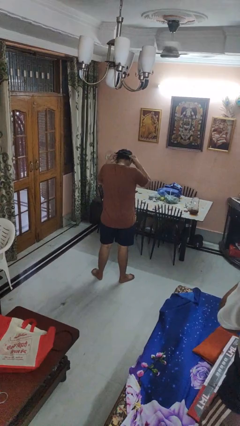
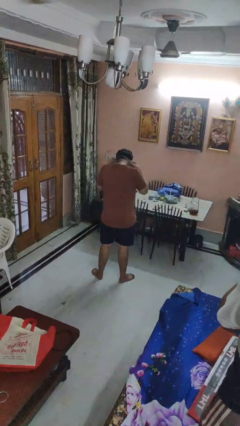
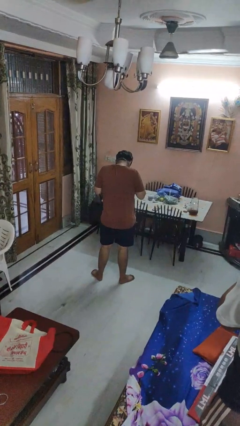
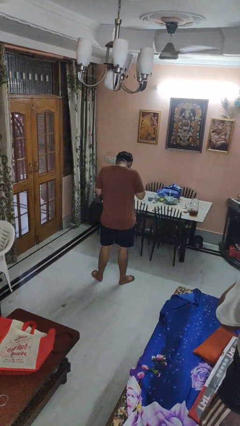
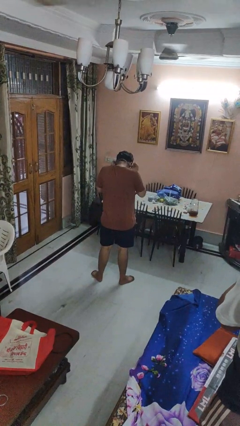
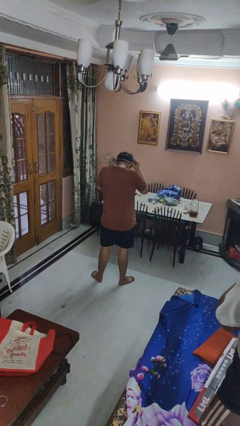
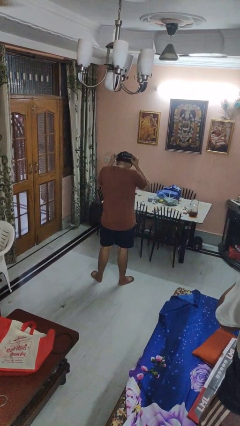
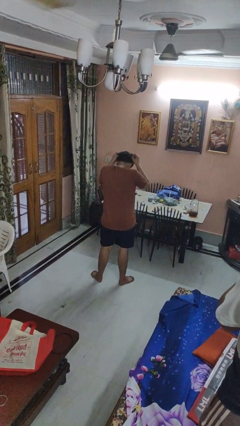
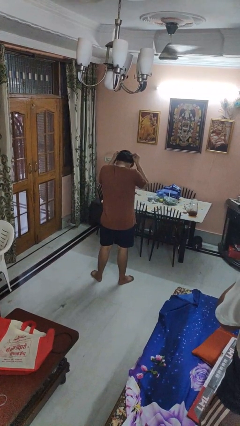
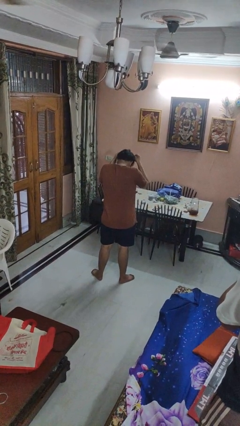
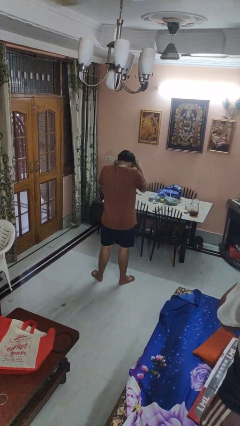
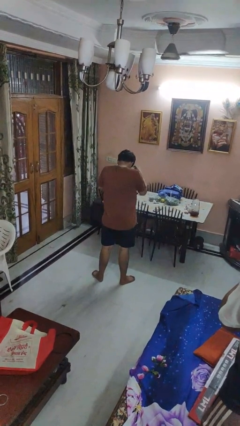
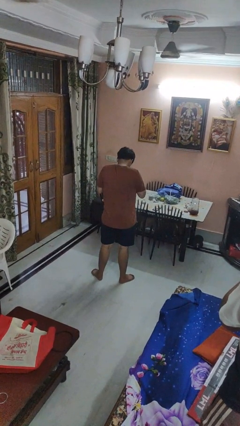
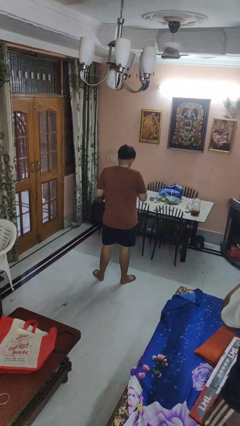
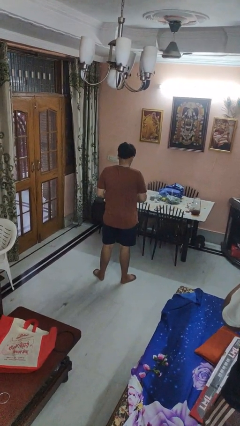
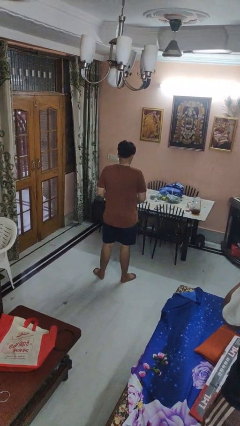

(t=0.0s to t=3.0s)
person takes off necktie

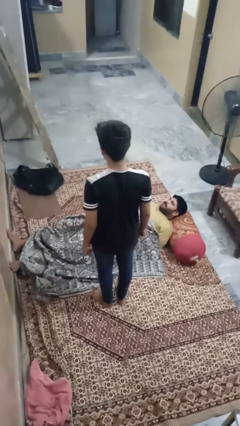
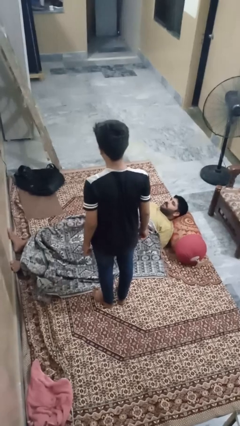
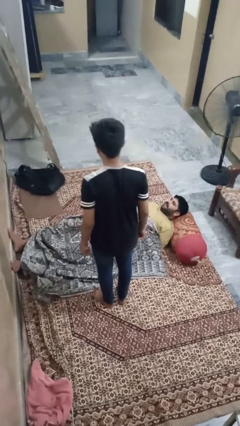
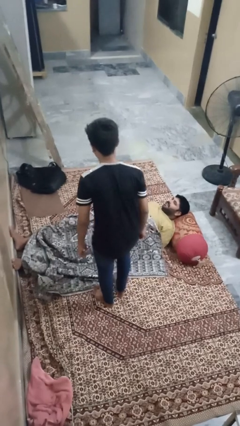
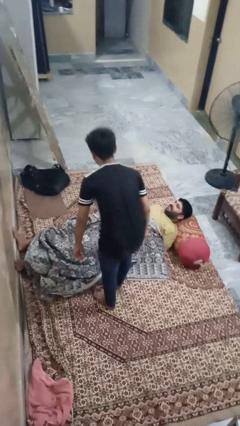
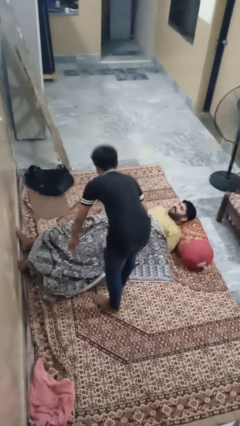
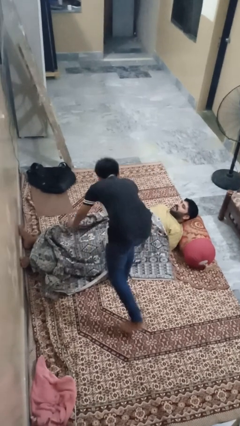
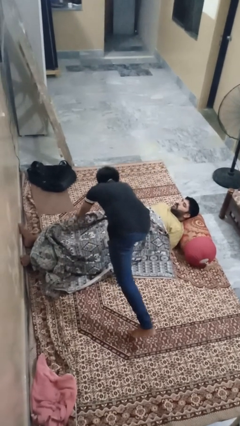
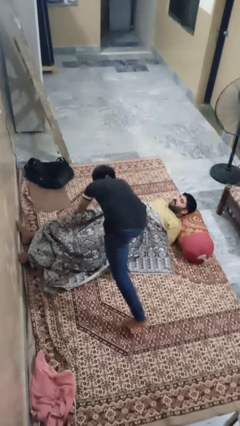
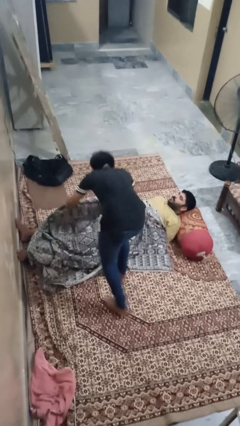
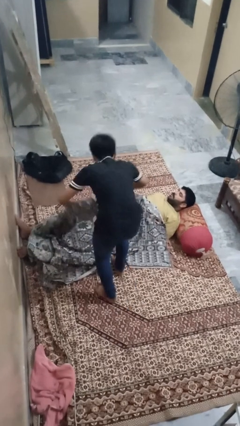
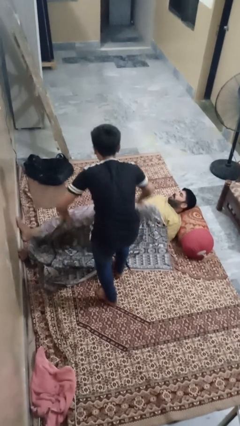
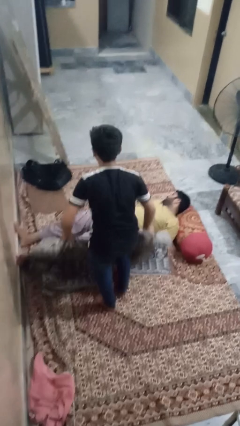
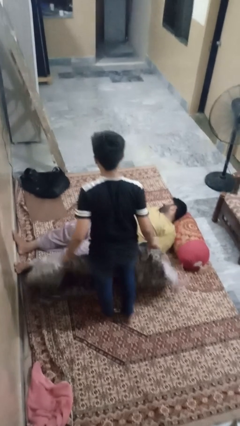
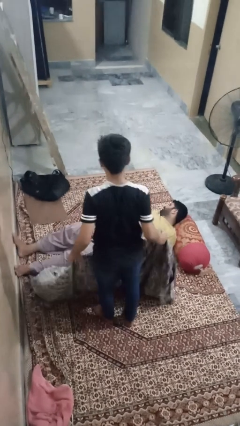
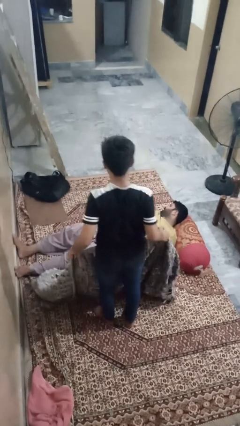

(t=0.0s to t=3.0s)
person uncovers friend with blanket

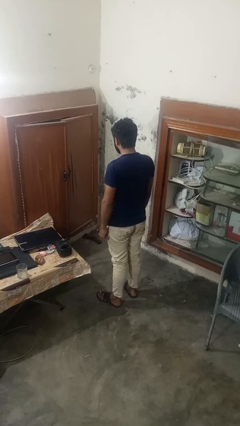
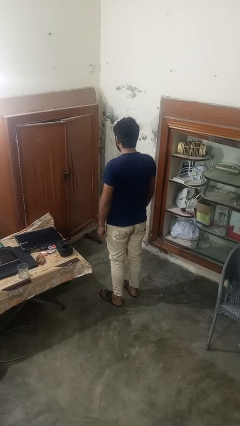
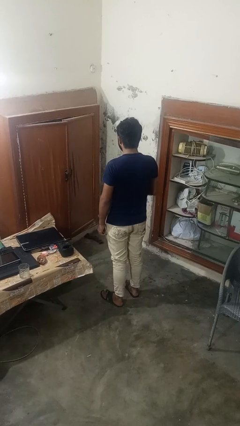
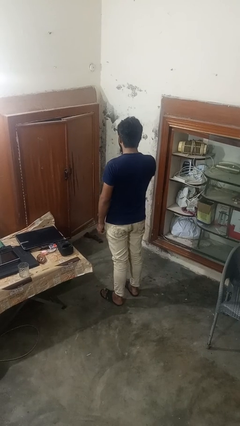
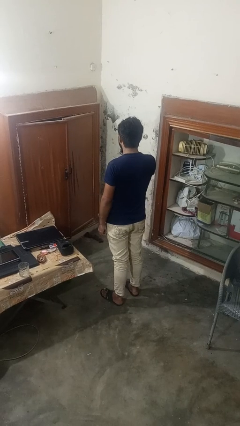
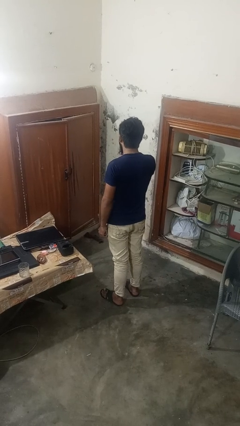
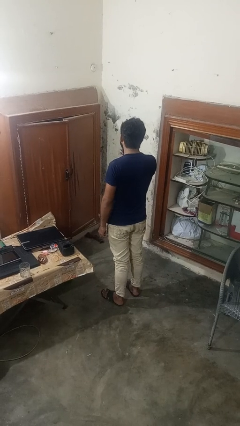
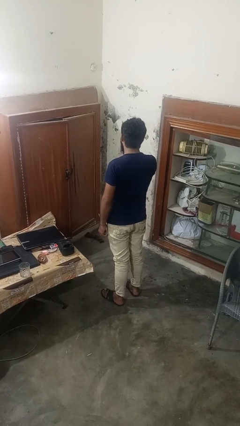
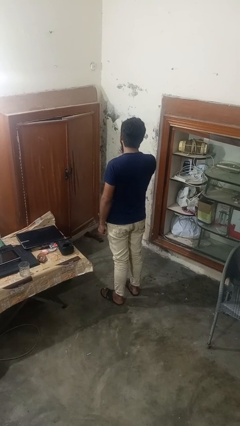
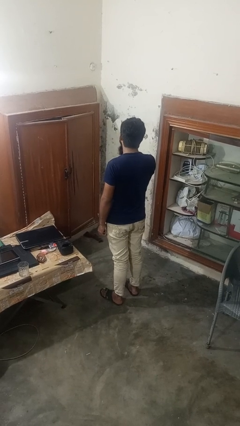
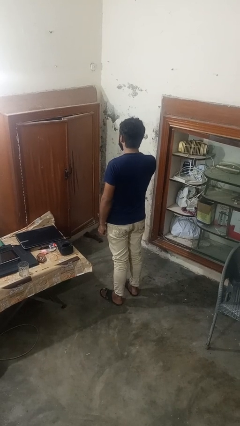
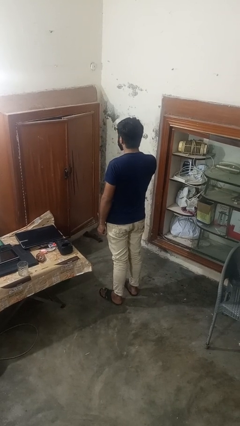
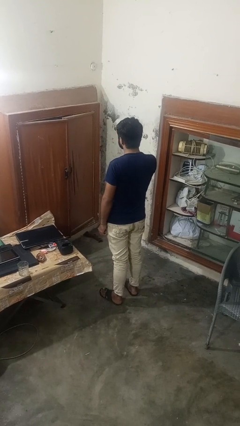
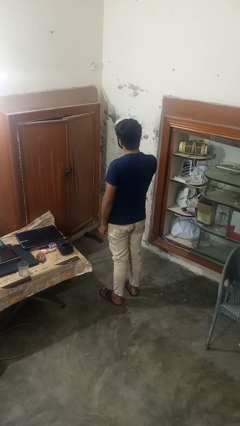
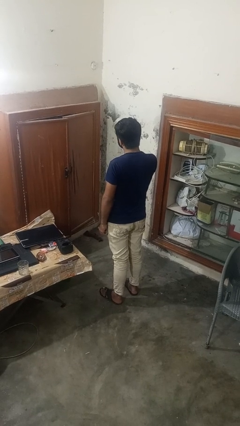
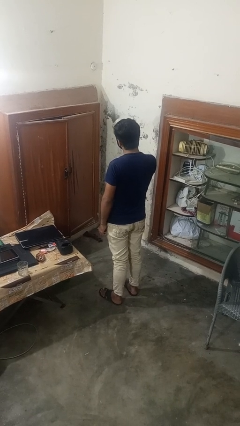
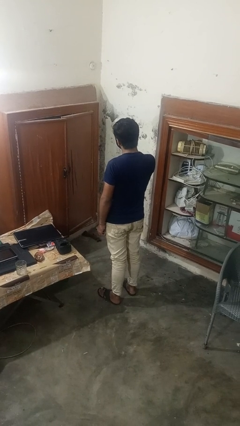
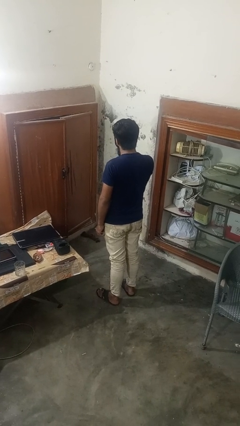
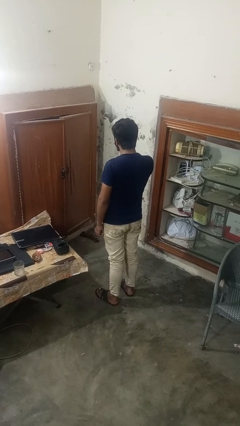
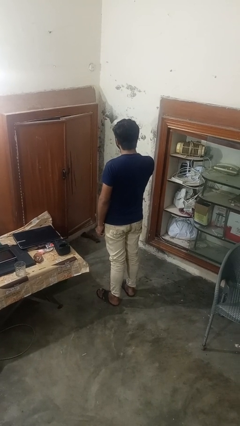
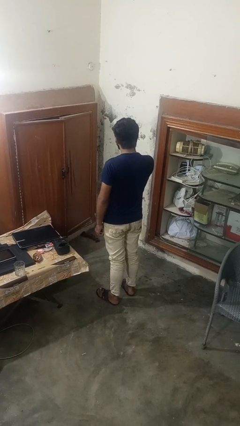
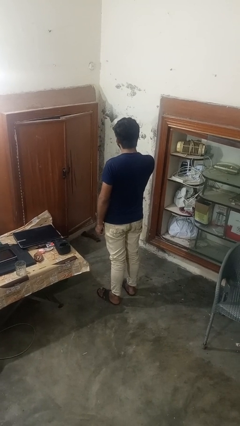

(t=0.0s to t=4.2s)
person wipes mouth with napkin

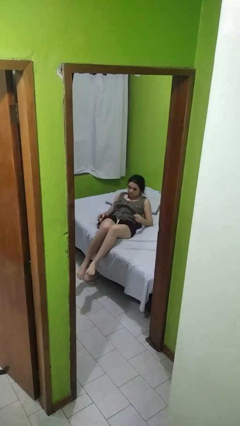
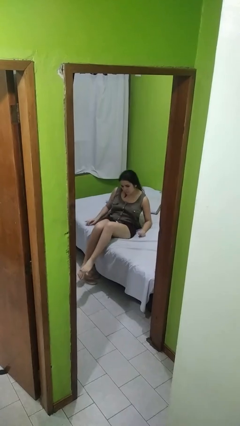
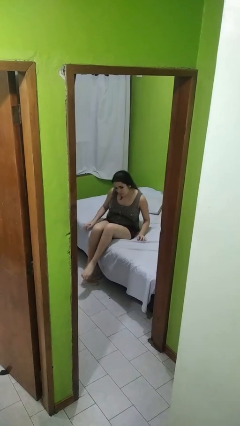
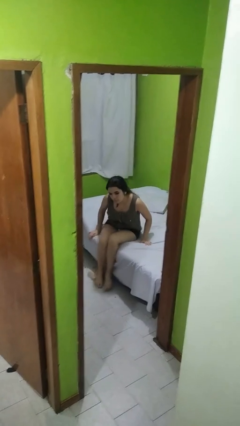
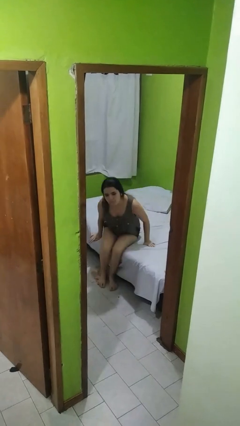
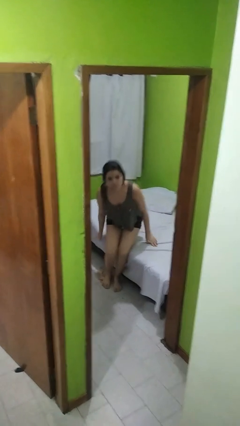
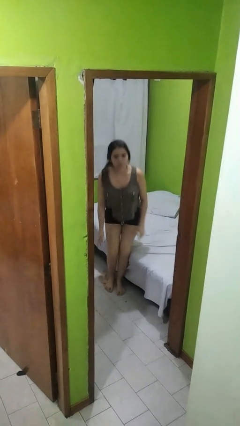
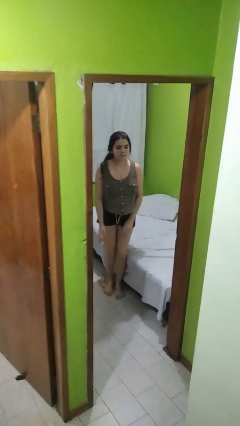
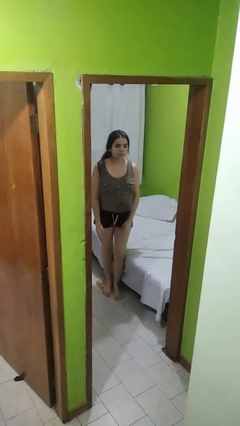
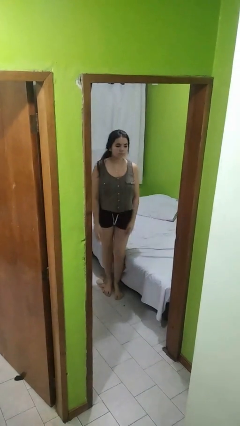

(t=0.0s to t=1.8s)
person stands up

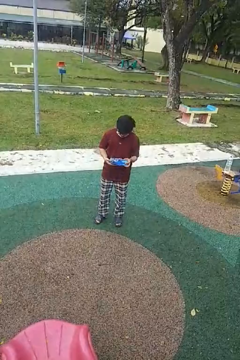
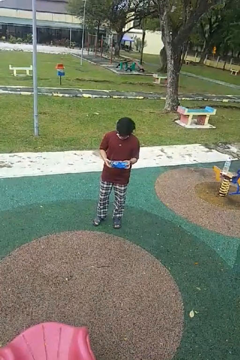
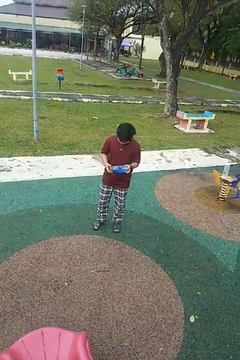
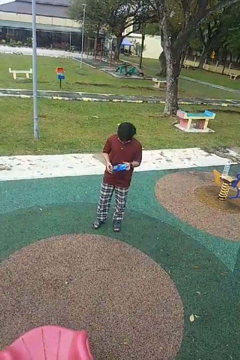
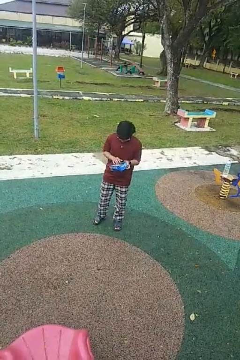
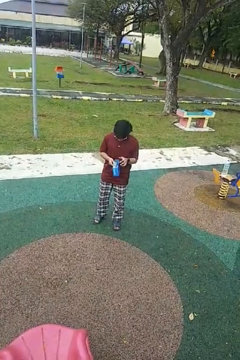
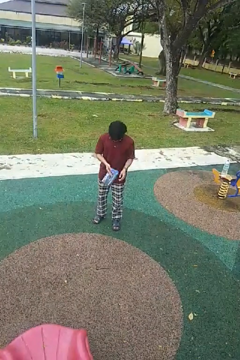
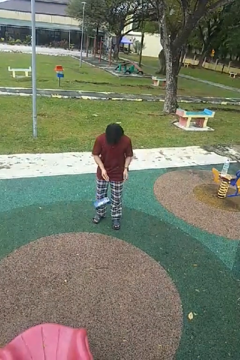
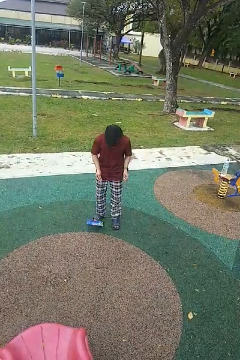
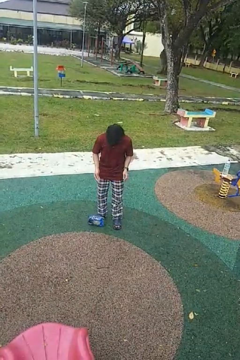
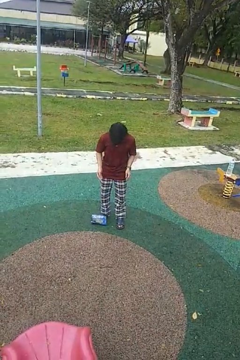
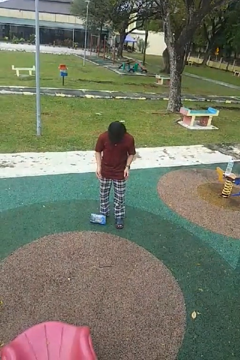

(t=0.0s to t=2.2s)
person drops object

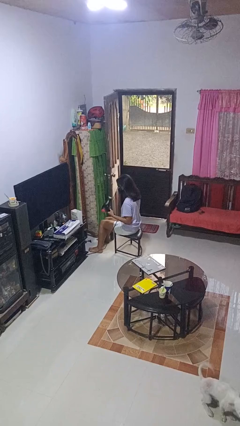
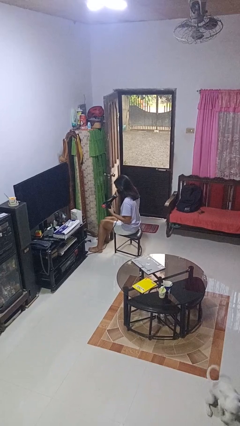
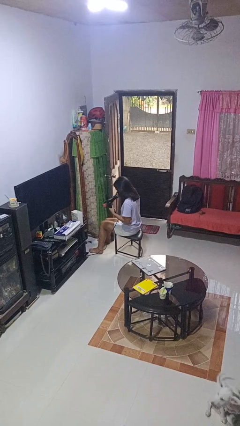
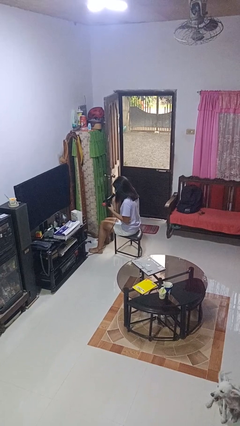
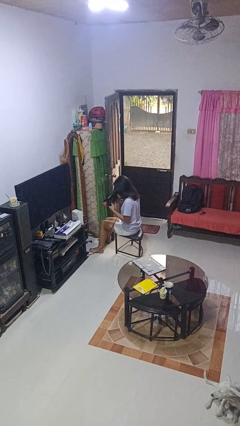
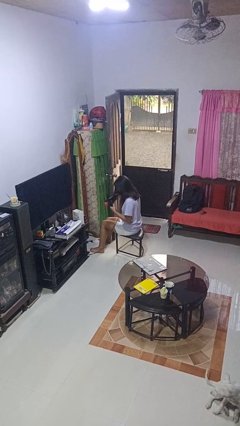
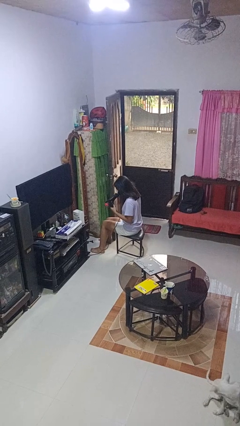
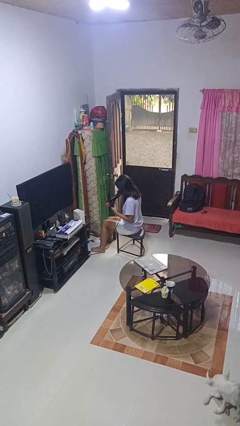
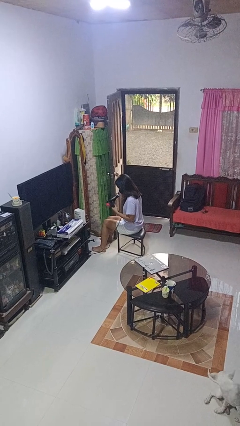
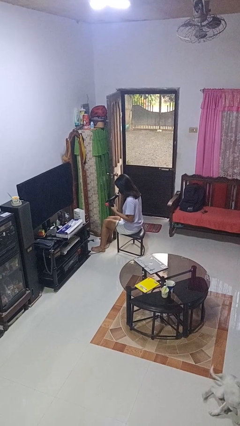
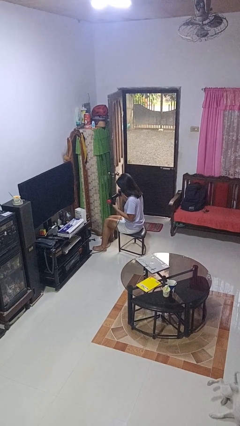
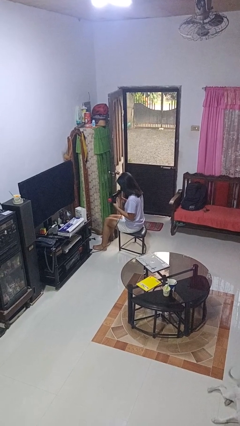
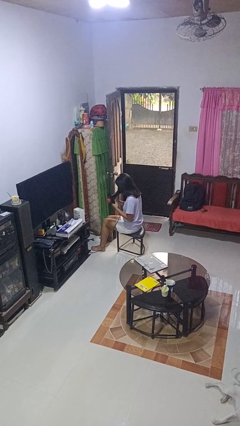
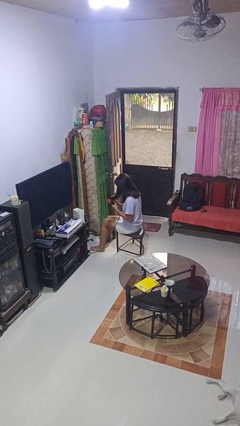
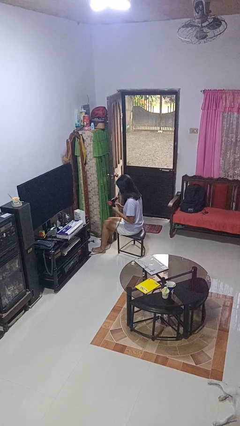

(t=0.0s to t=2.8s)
person dries hair with hairdryer

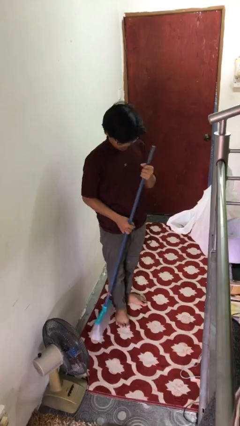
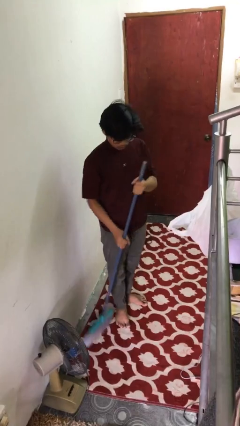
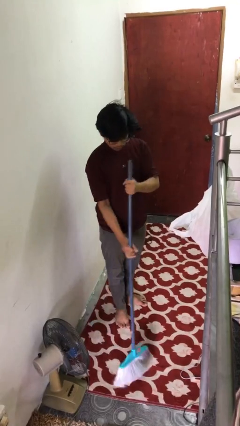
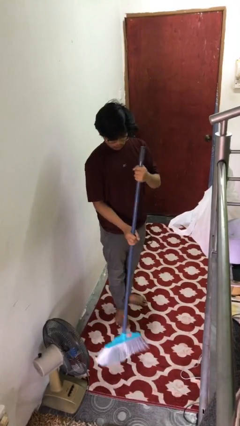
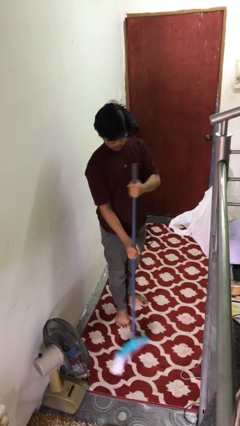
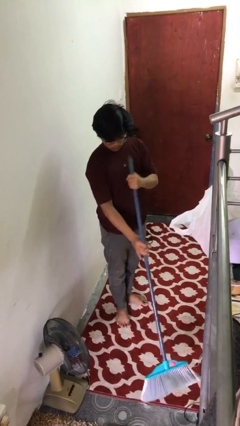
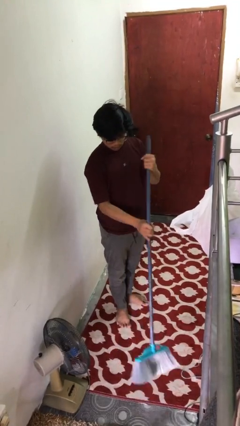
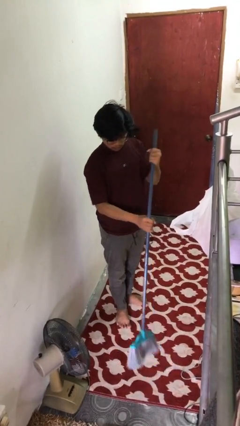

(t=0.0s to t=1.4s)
person sweeps floor
